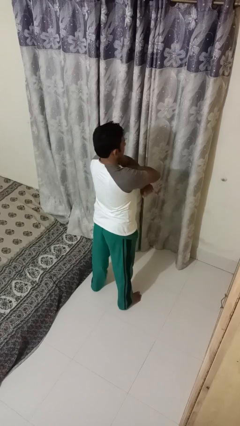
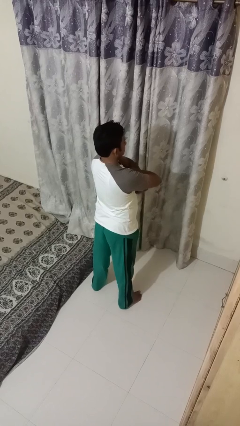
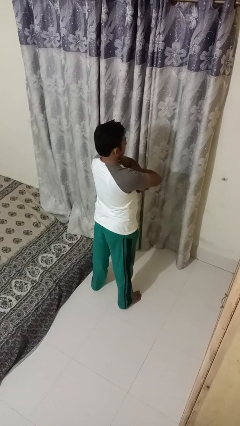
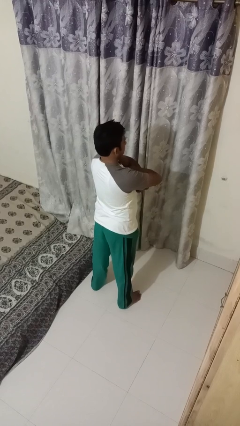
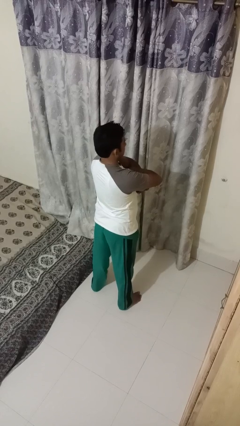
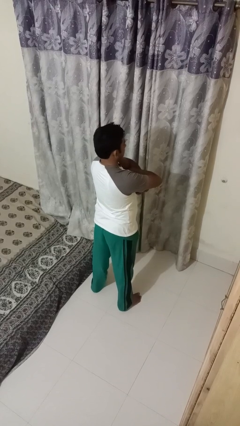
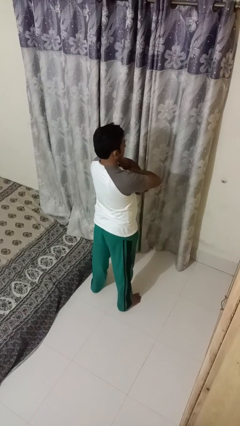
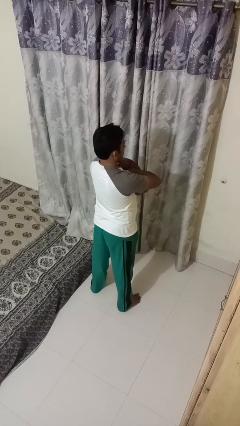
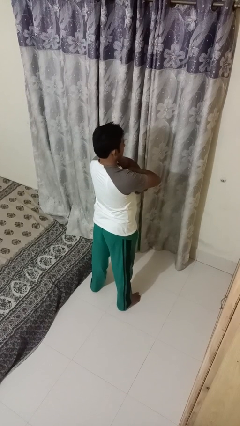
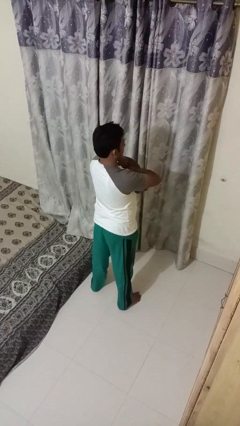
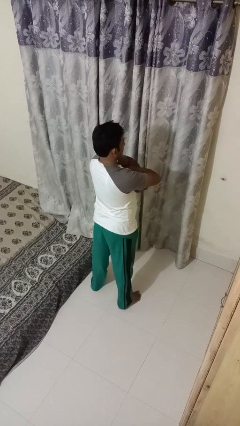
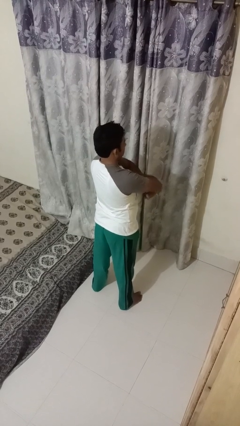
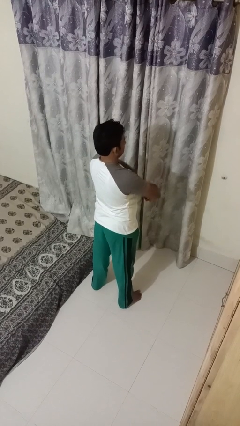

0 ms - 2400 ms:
person gestures arms x

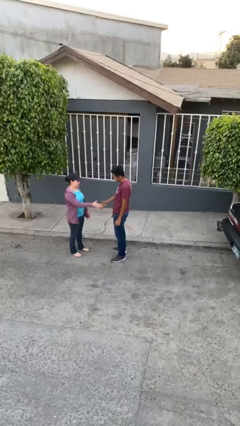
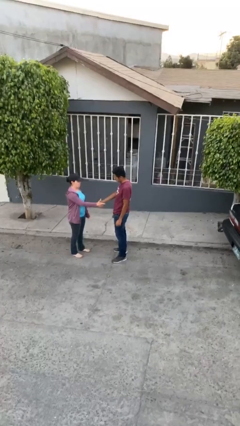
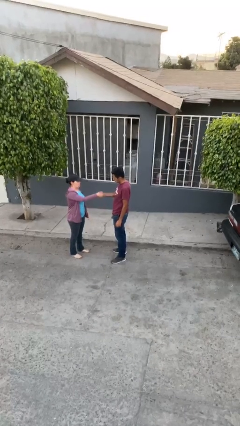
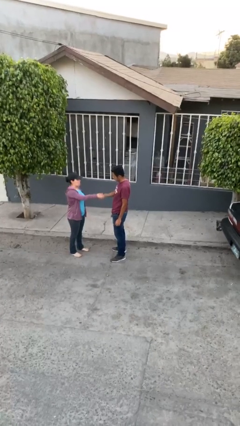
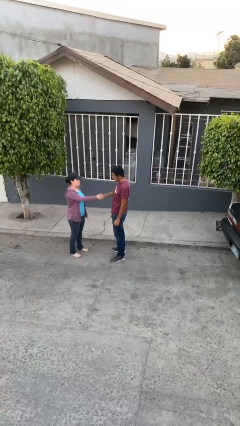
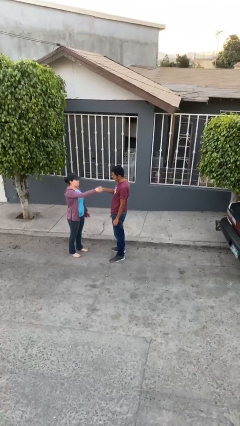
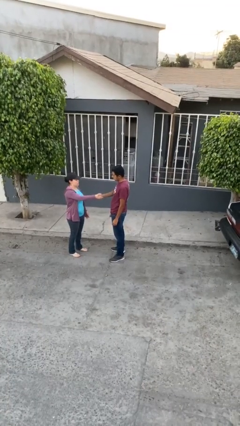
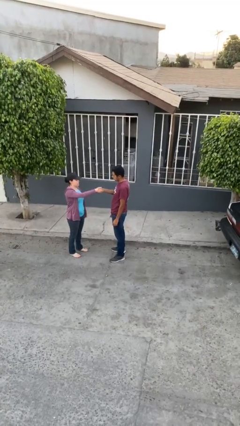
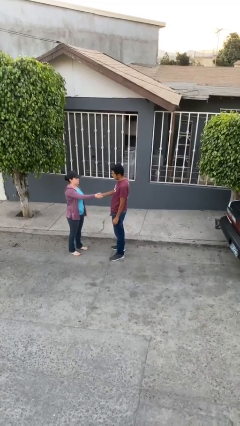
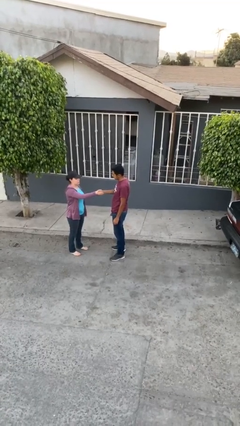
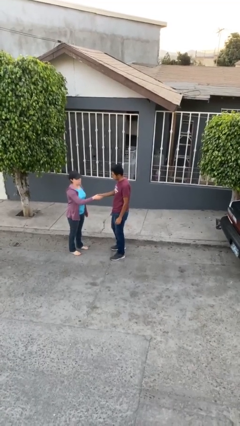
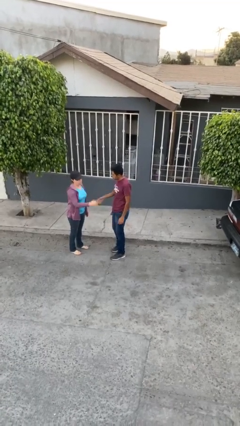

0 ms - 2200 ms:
person shakes hand

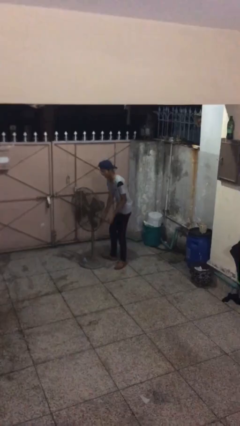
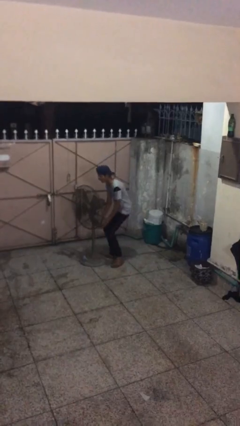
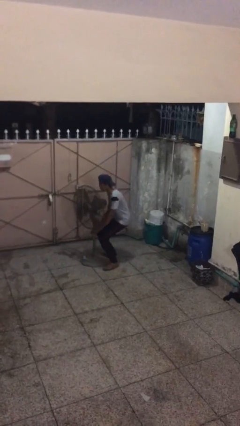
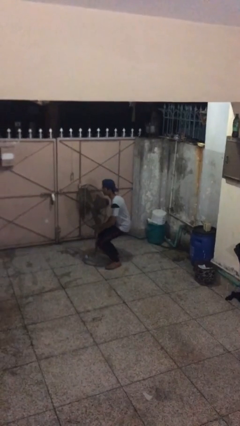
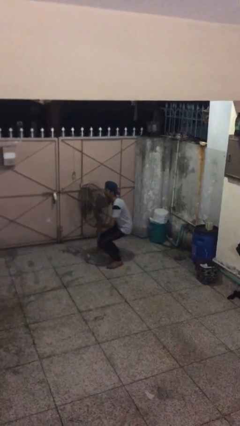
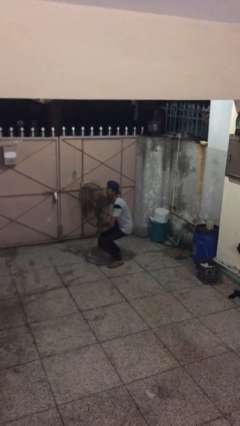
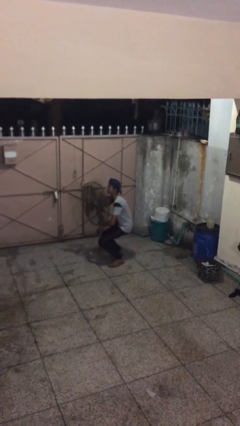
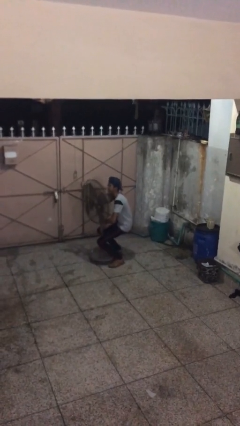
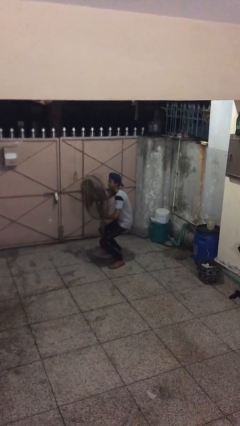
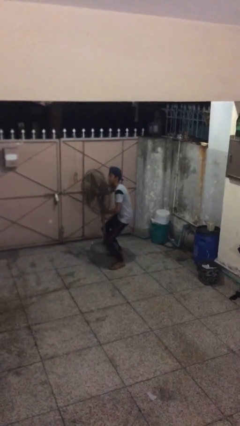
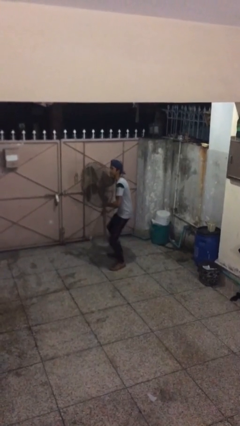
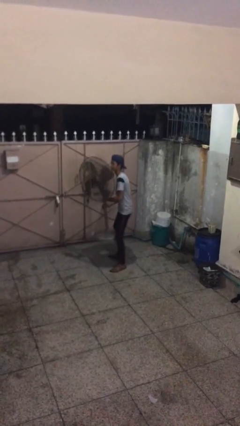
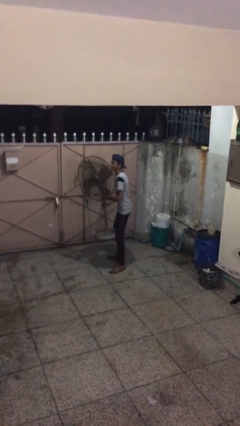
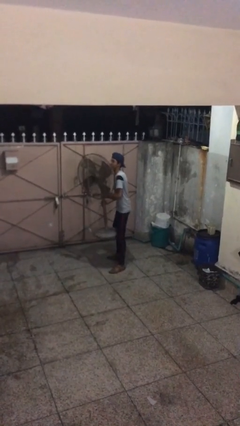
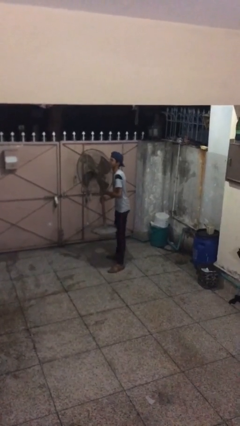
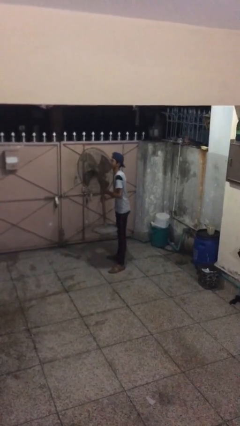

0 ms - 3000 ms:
person picks up object from floor

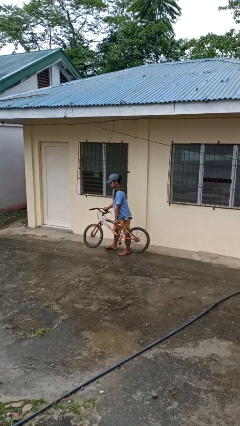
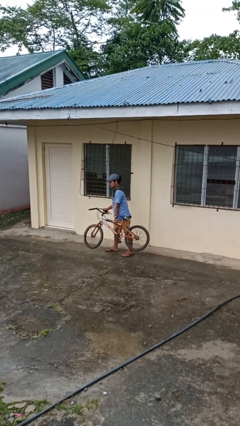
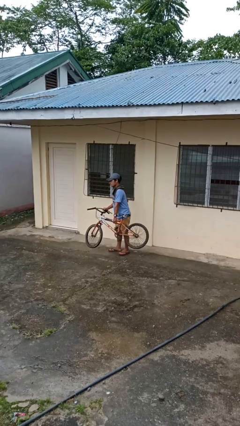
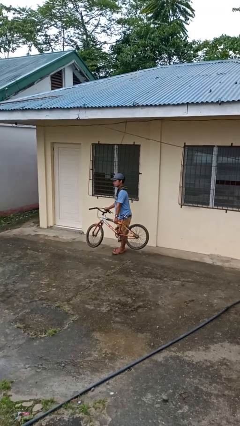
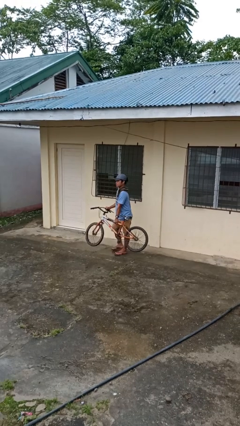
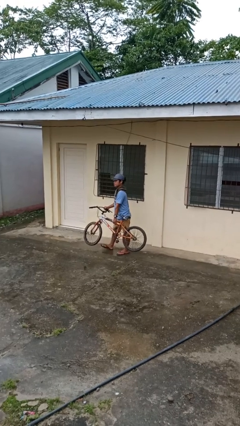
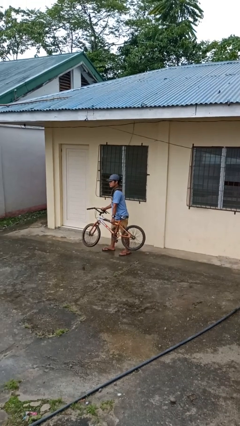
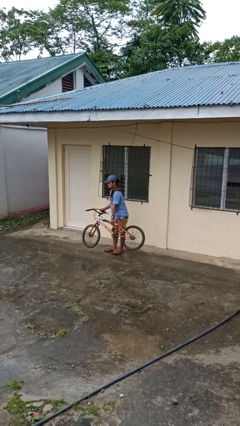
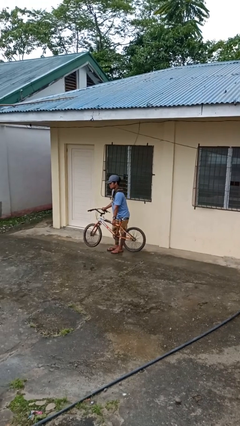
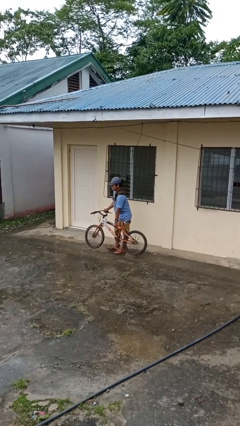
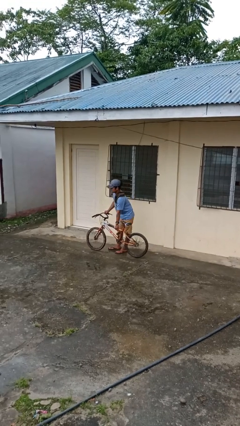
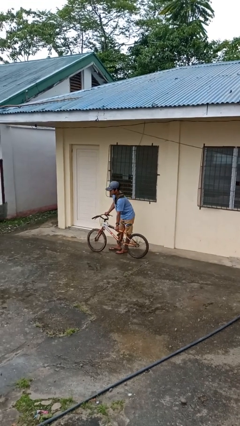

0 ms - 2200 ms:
person carries bicycle

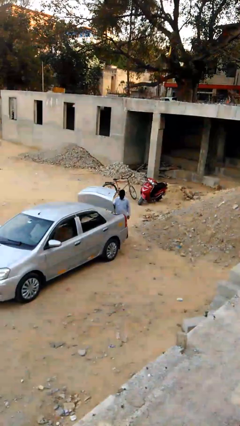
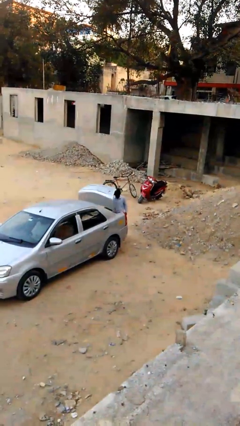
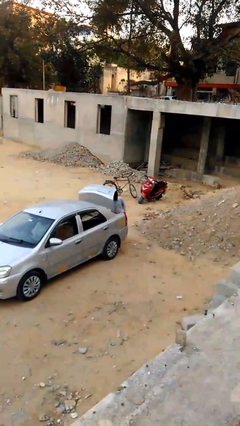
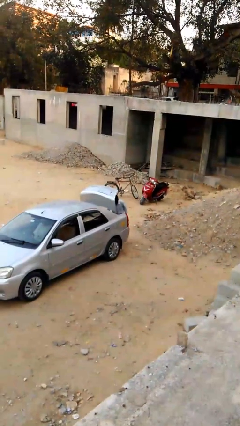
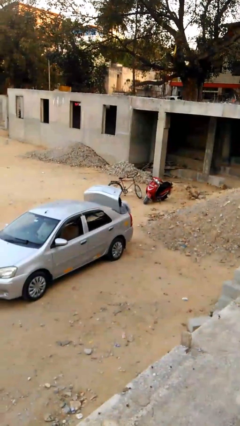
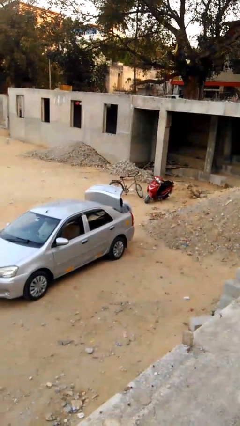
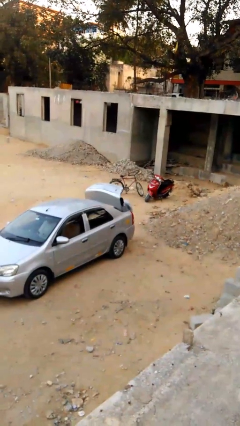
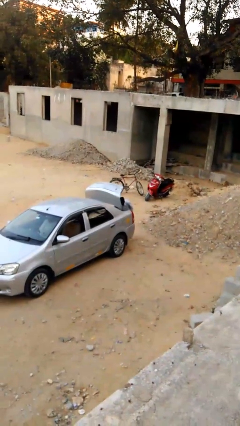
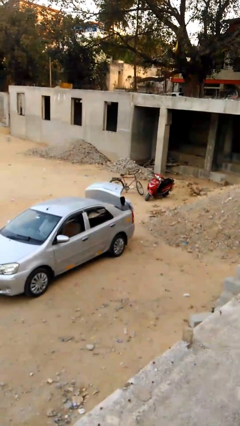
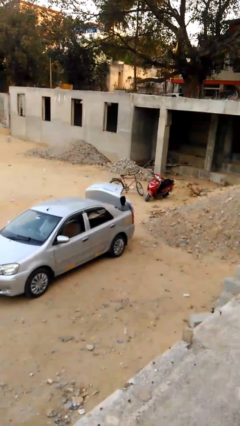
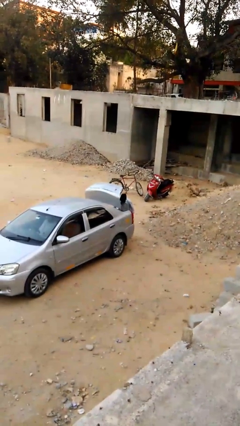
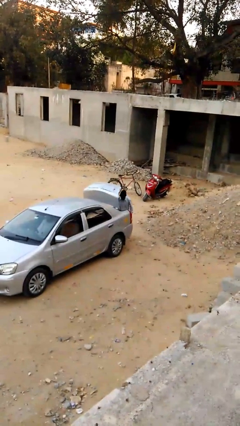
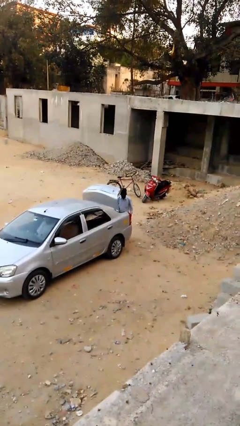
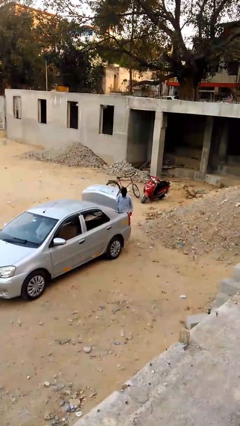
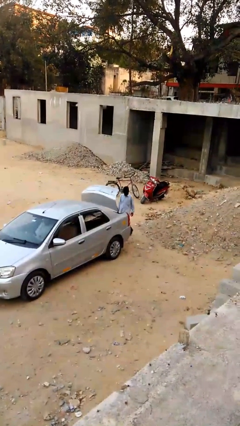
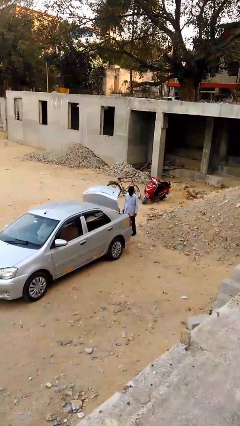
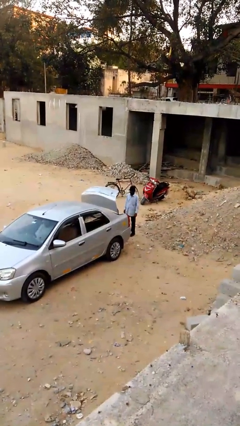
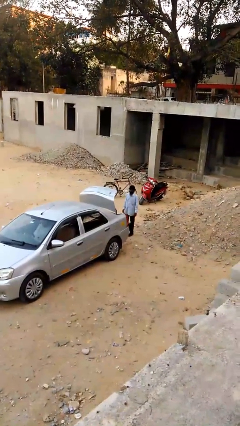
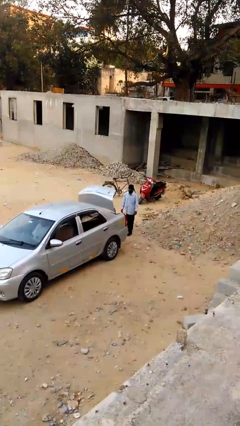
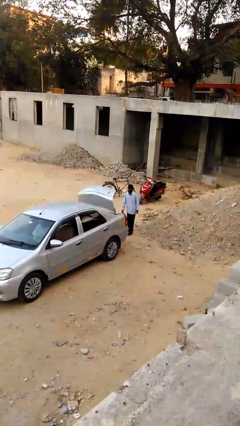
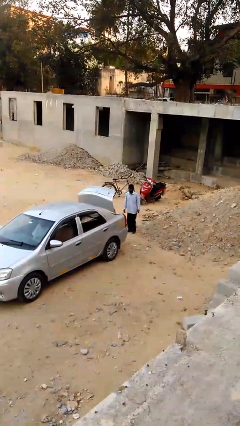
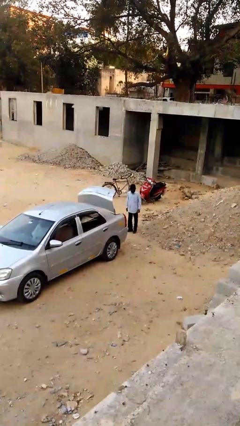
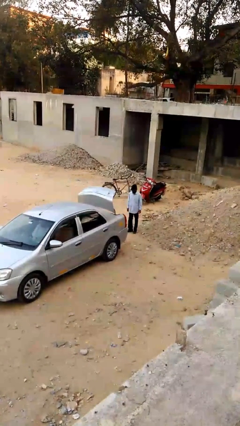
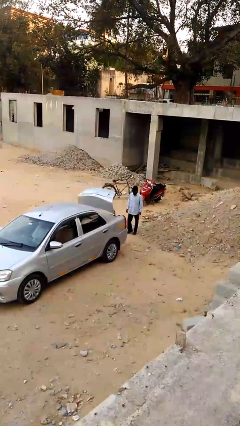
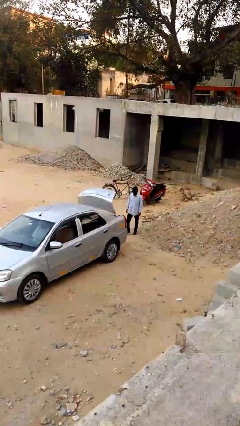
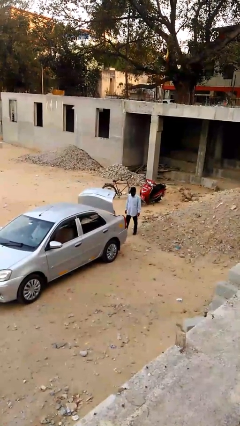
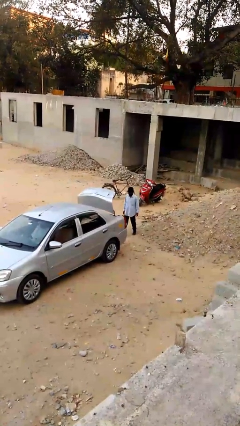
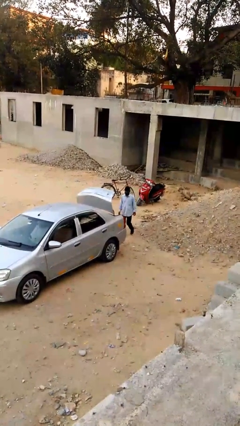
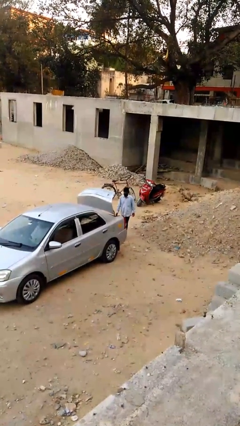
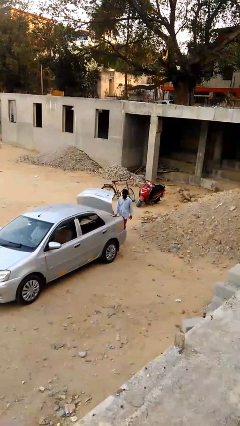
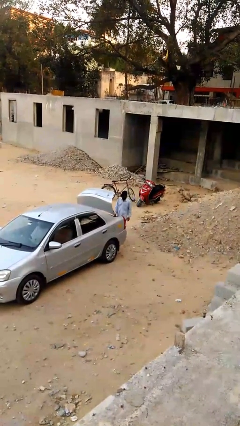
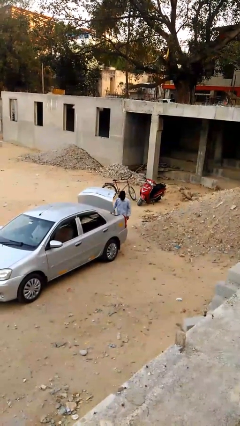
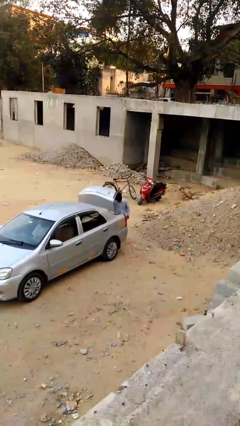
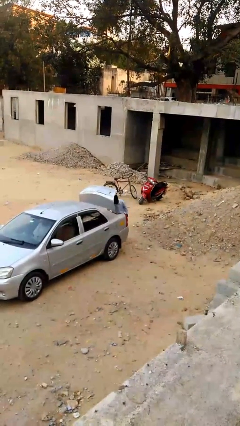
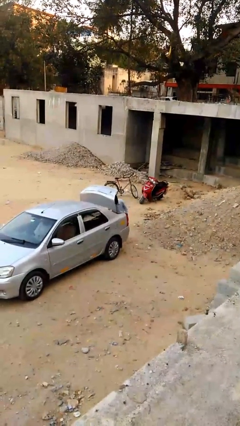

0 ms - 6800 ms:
person loads car

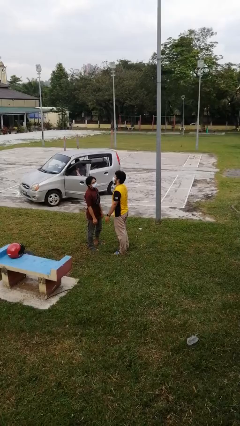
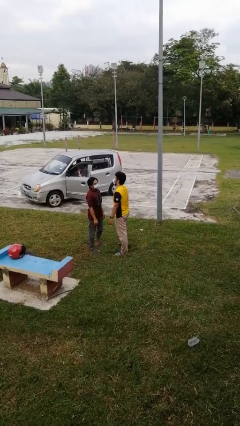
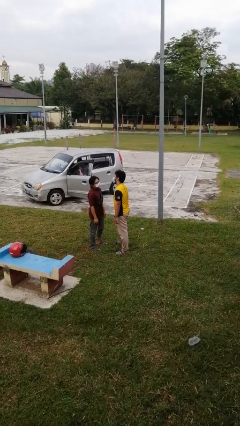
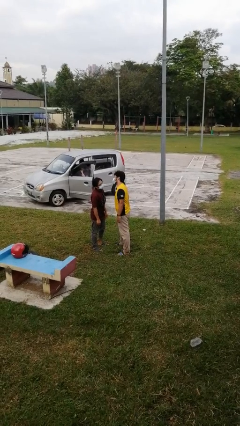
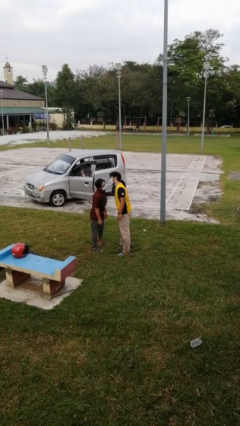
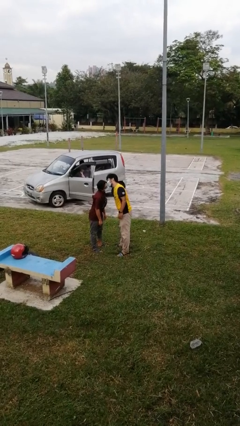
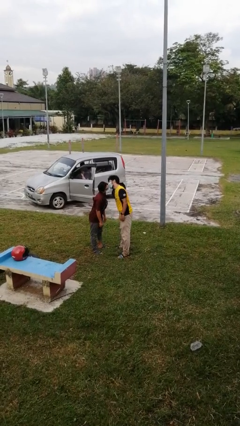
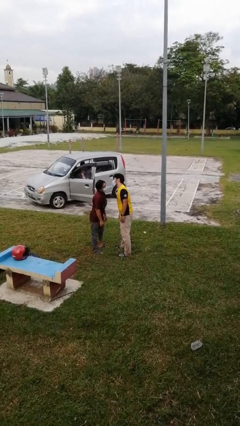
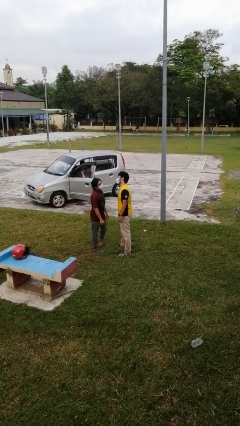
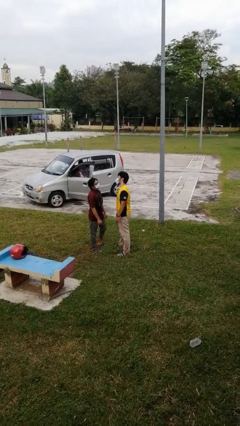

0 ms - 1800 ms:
person kisses cheek of person
